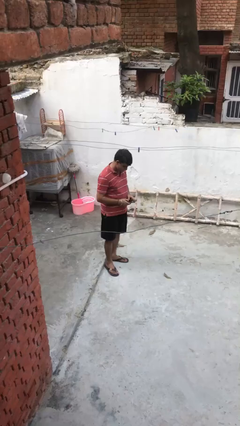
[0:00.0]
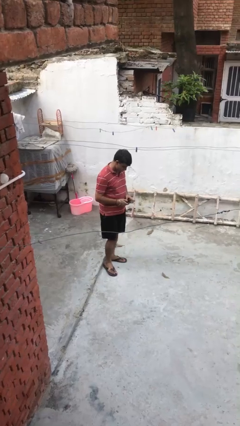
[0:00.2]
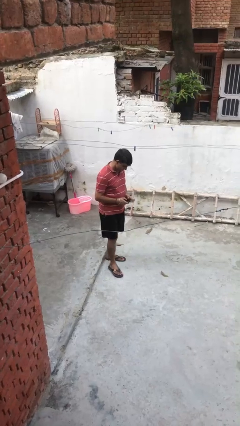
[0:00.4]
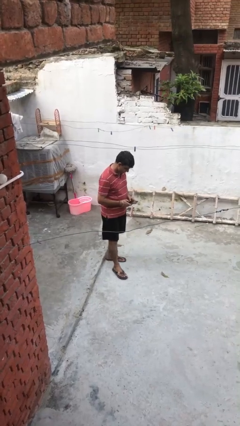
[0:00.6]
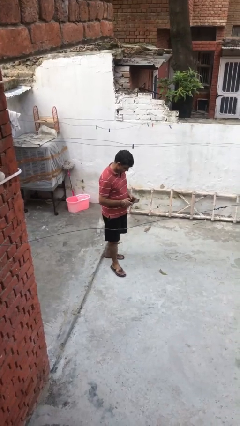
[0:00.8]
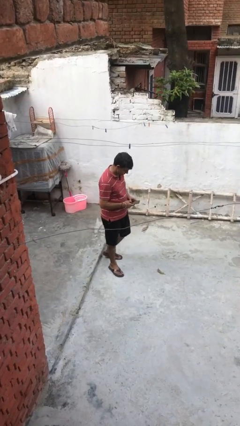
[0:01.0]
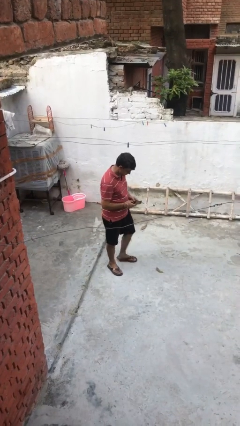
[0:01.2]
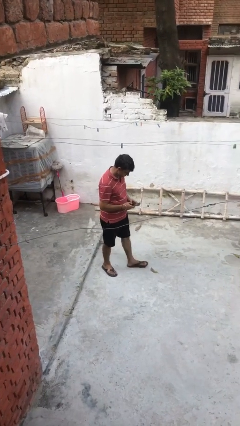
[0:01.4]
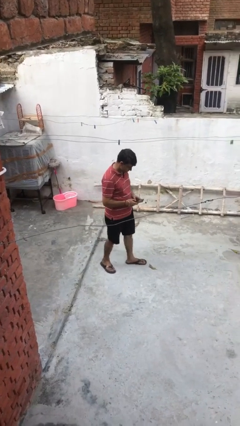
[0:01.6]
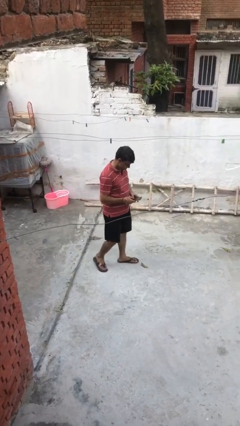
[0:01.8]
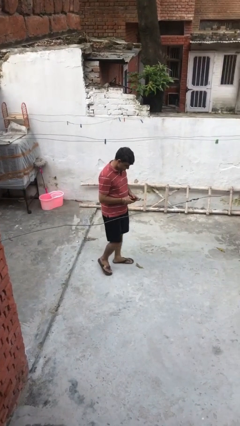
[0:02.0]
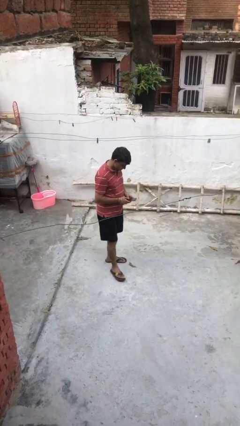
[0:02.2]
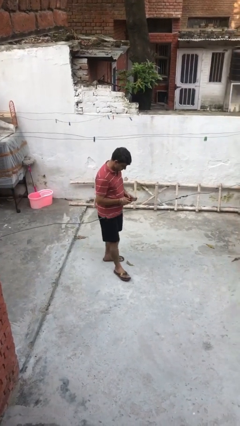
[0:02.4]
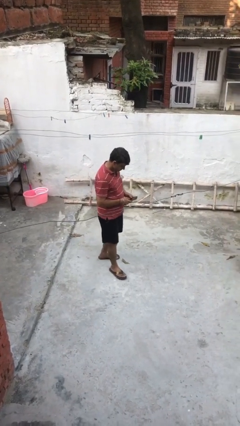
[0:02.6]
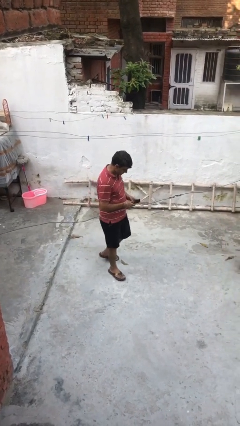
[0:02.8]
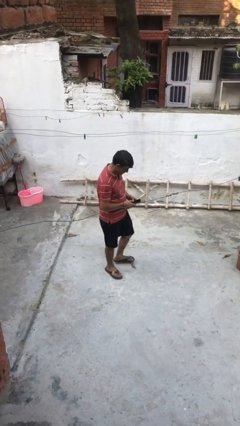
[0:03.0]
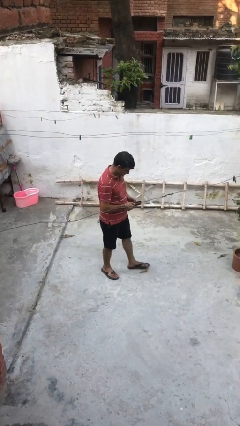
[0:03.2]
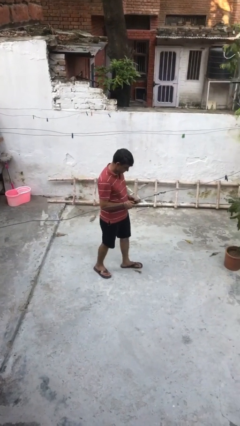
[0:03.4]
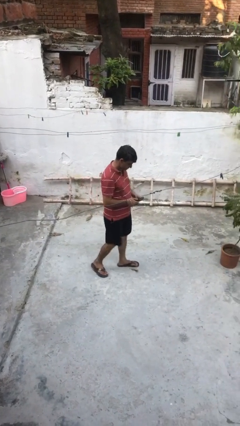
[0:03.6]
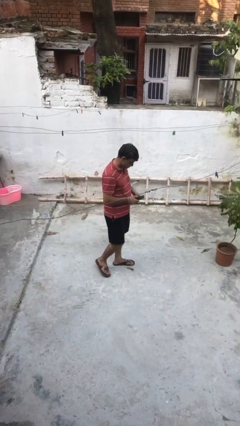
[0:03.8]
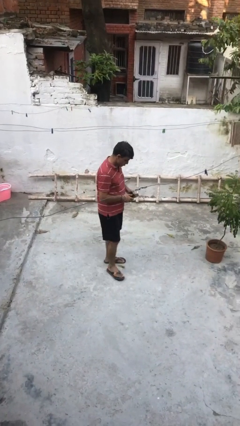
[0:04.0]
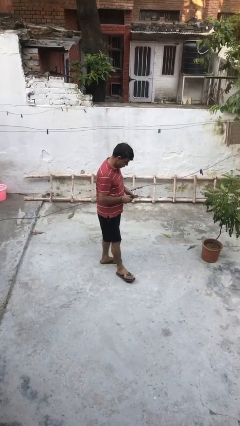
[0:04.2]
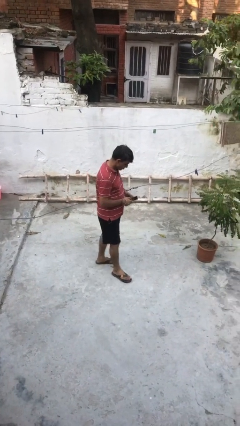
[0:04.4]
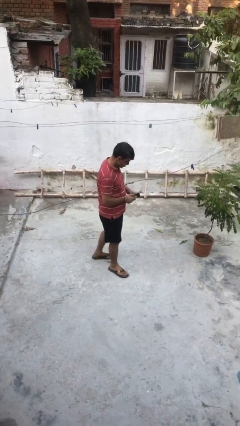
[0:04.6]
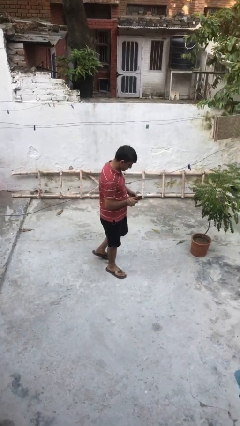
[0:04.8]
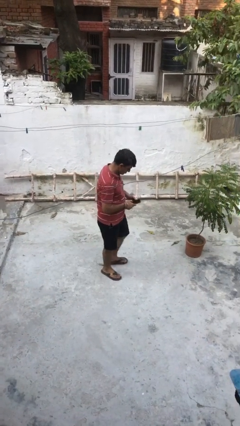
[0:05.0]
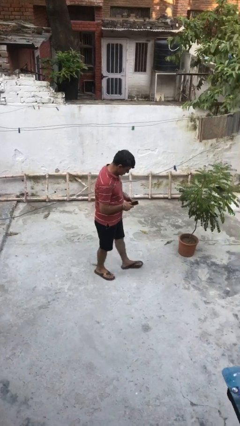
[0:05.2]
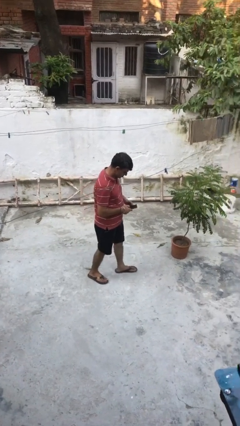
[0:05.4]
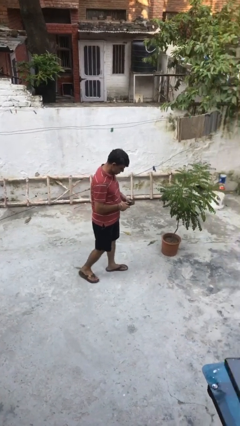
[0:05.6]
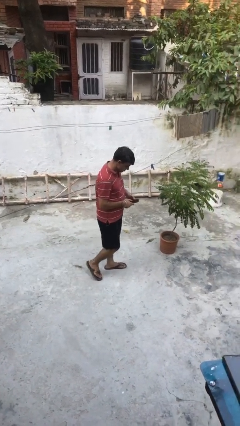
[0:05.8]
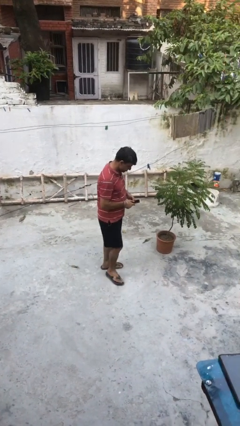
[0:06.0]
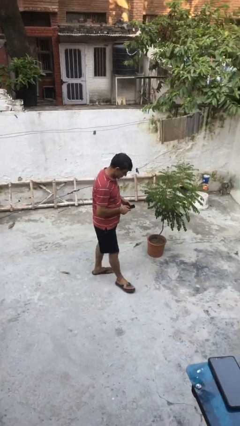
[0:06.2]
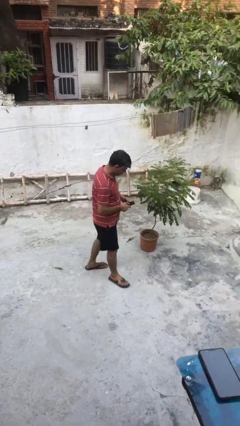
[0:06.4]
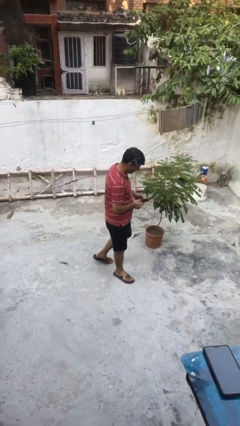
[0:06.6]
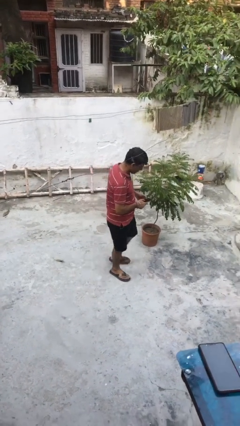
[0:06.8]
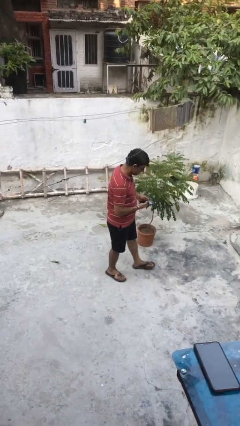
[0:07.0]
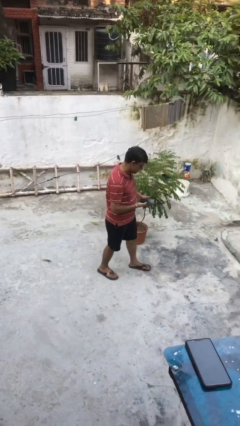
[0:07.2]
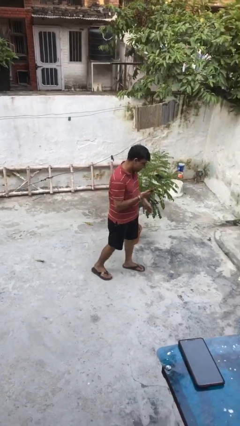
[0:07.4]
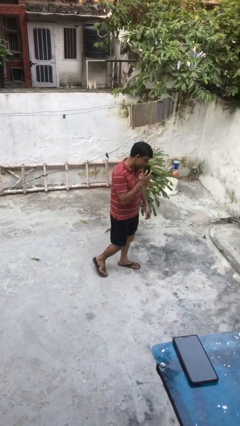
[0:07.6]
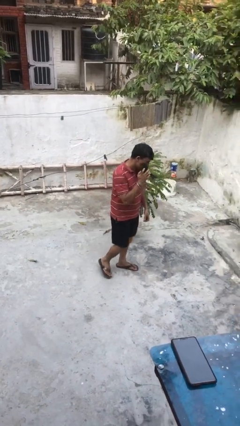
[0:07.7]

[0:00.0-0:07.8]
person texts on phone

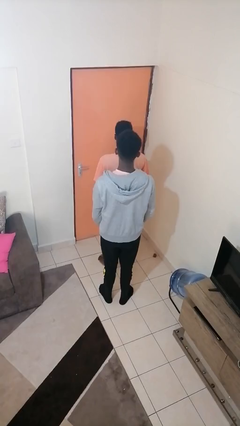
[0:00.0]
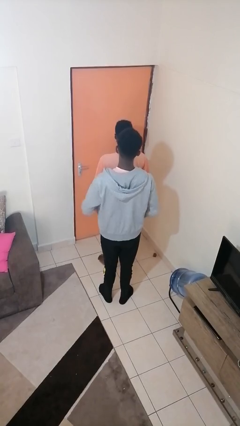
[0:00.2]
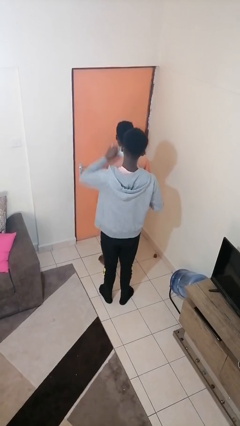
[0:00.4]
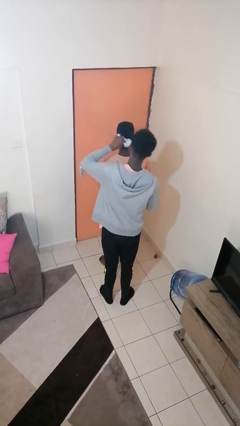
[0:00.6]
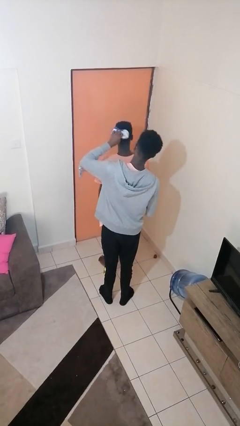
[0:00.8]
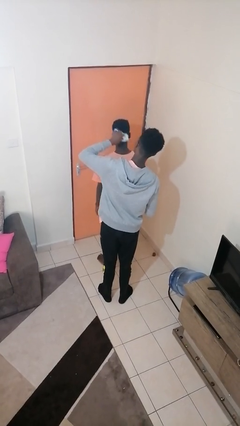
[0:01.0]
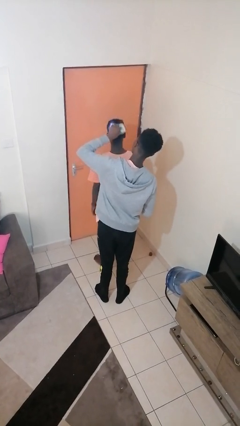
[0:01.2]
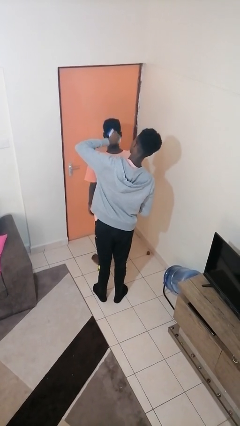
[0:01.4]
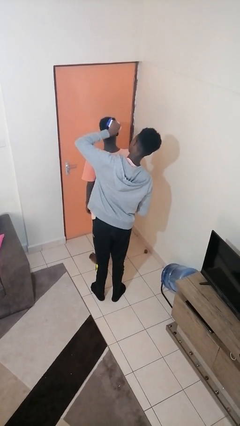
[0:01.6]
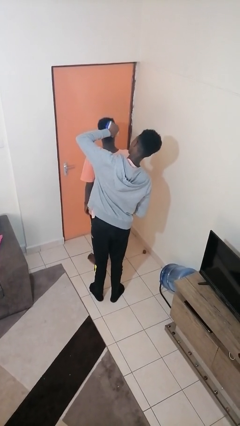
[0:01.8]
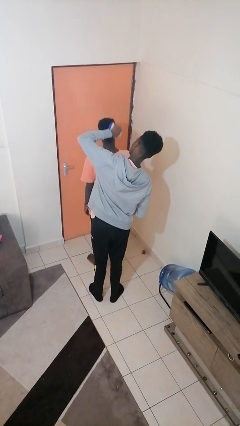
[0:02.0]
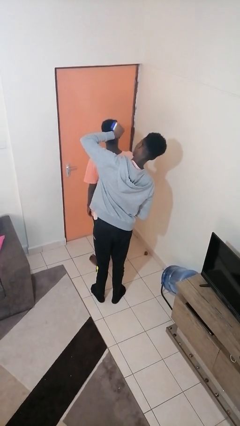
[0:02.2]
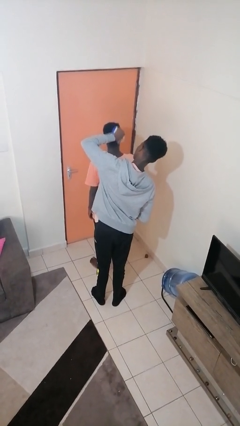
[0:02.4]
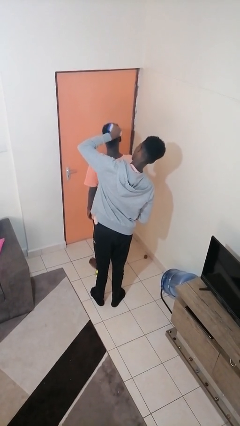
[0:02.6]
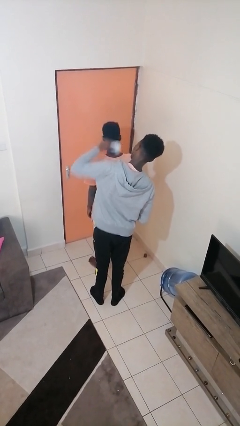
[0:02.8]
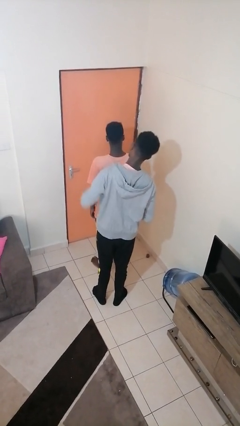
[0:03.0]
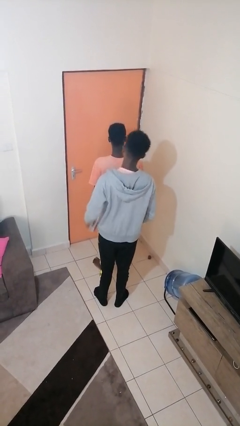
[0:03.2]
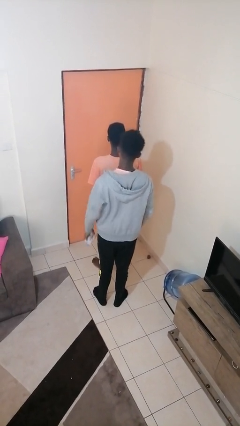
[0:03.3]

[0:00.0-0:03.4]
person brushes hair of person

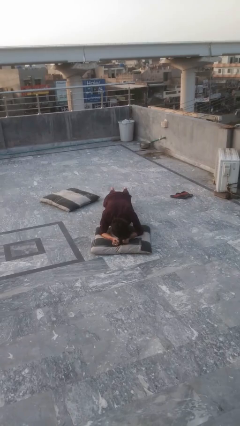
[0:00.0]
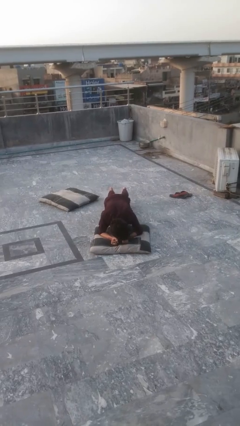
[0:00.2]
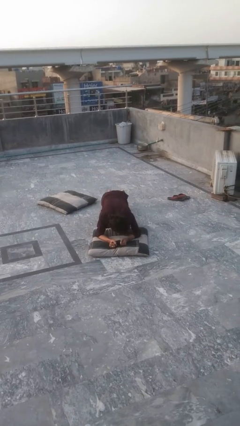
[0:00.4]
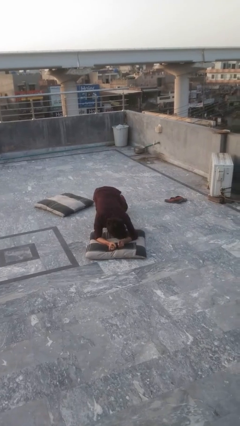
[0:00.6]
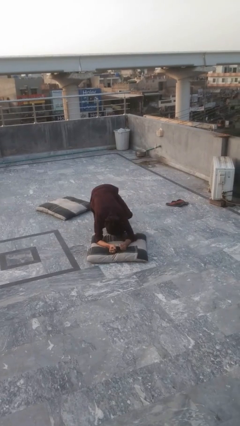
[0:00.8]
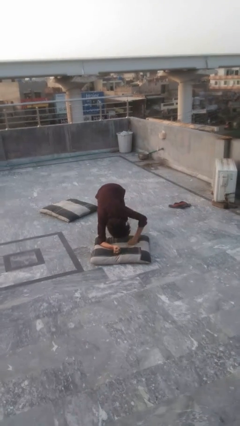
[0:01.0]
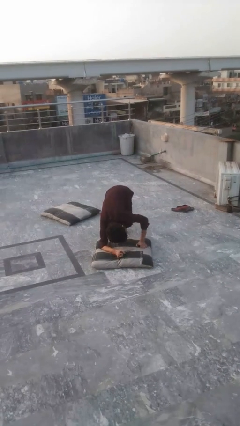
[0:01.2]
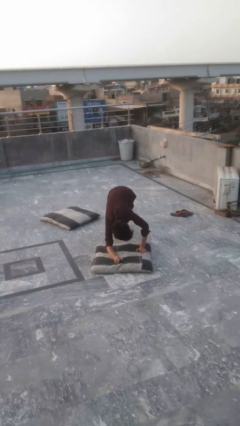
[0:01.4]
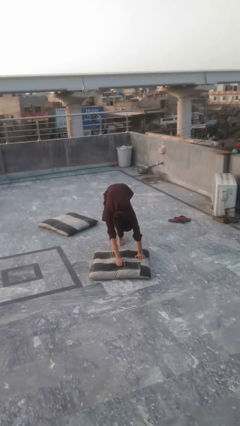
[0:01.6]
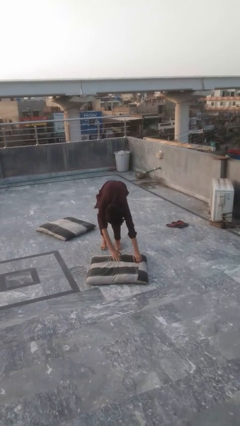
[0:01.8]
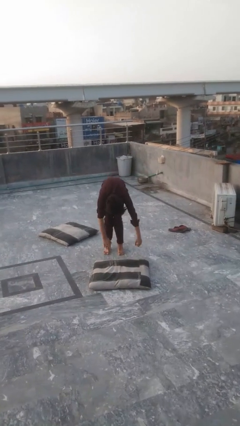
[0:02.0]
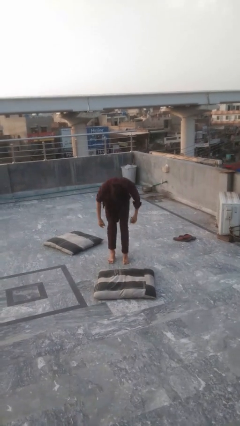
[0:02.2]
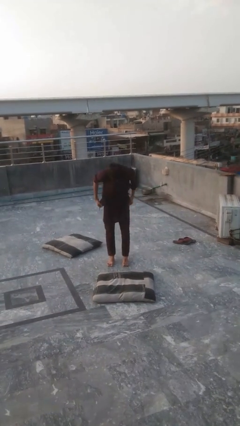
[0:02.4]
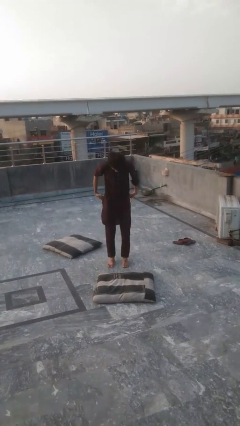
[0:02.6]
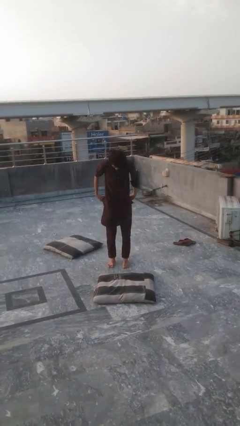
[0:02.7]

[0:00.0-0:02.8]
person stands up from floor

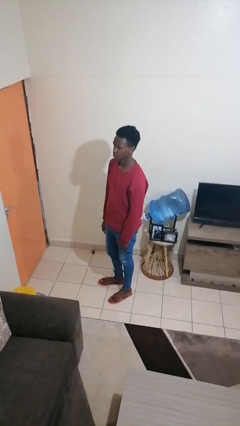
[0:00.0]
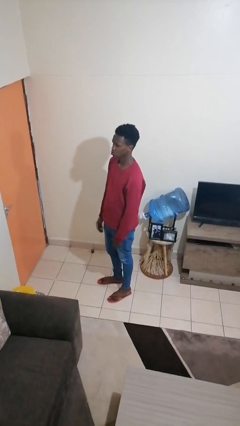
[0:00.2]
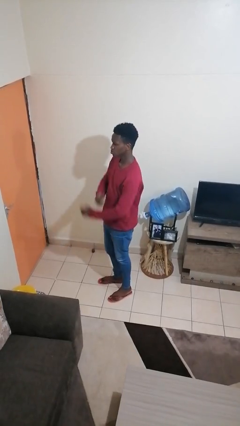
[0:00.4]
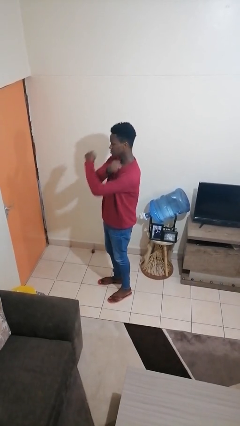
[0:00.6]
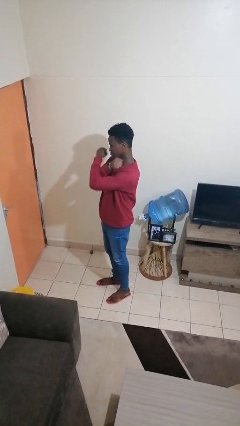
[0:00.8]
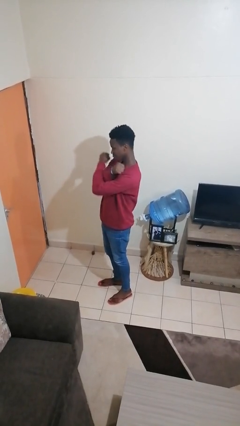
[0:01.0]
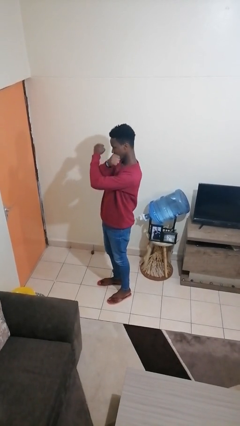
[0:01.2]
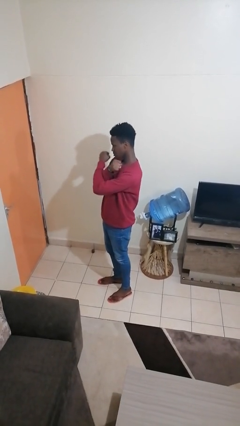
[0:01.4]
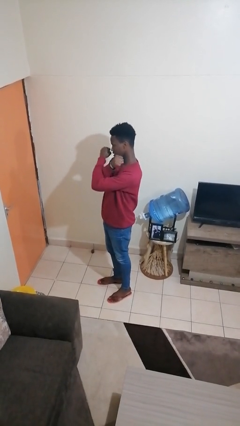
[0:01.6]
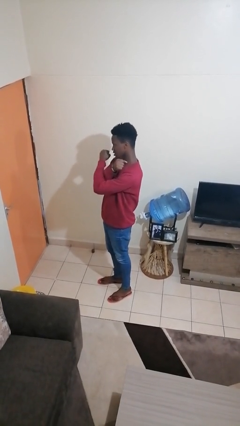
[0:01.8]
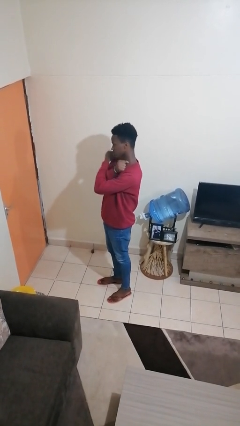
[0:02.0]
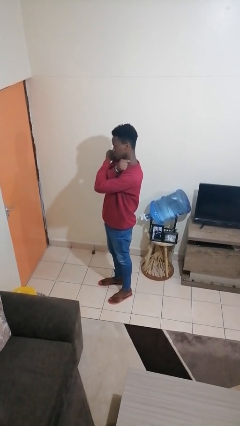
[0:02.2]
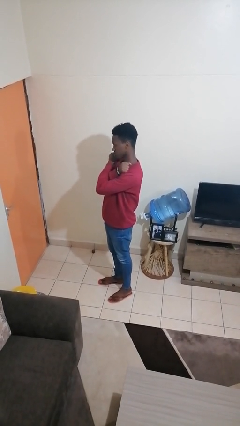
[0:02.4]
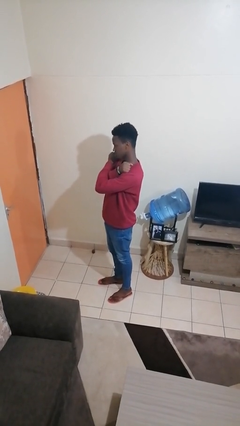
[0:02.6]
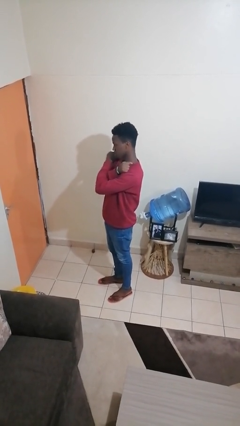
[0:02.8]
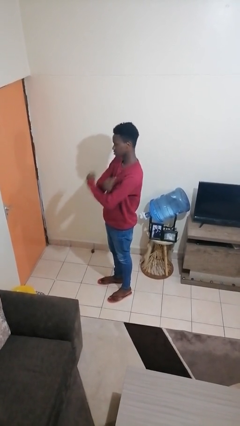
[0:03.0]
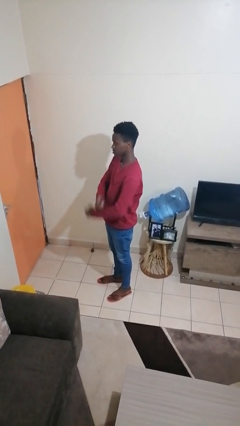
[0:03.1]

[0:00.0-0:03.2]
person gestures arms x

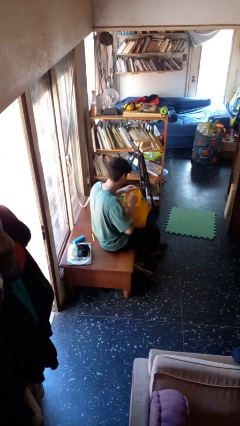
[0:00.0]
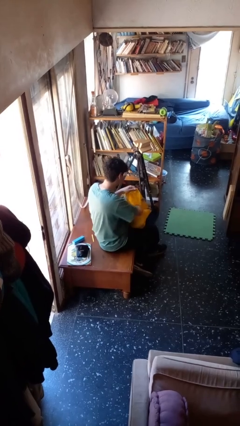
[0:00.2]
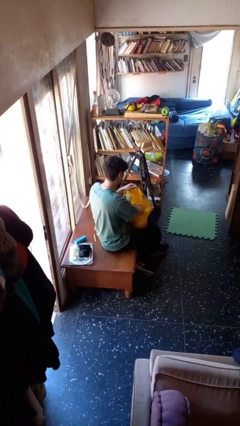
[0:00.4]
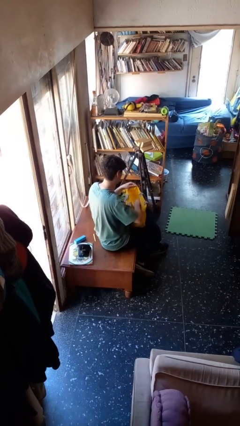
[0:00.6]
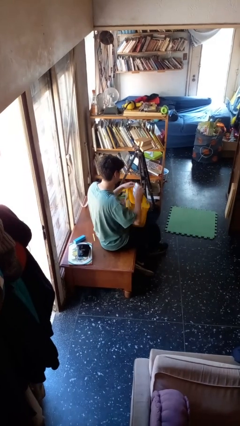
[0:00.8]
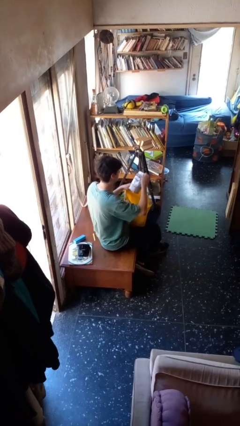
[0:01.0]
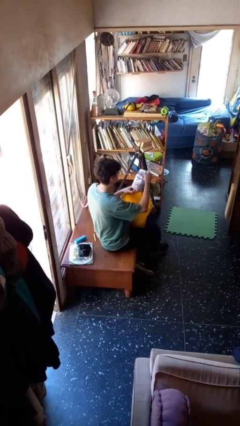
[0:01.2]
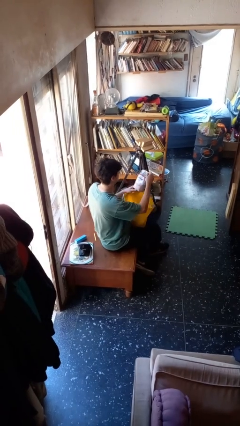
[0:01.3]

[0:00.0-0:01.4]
person takes object from bag
